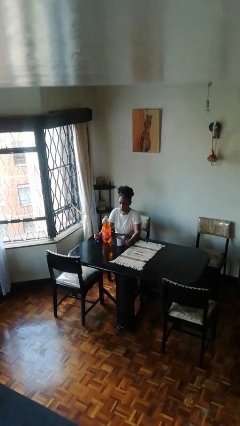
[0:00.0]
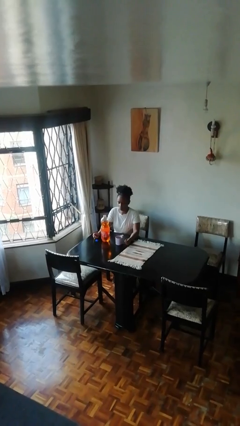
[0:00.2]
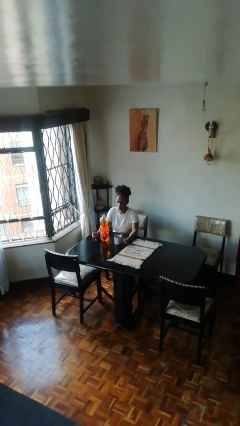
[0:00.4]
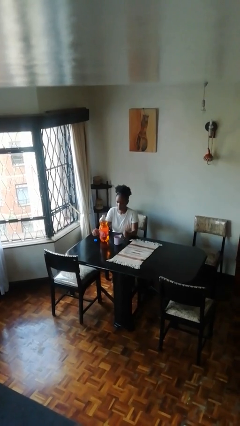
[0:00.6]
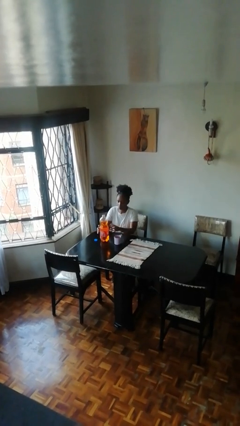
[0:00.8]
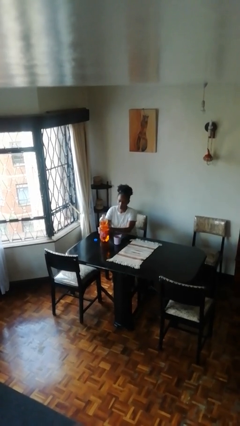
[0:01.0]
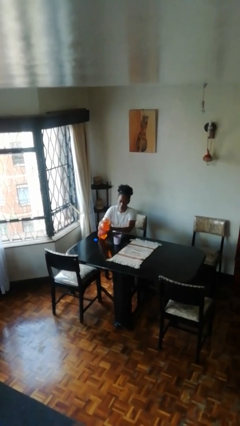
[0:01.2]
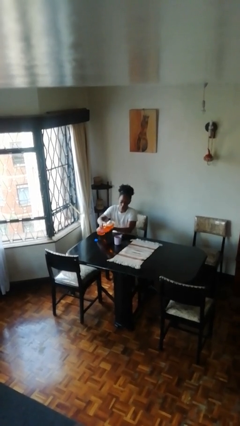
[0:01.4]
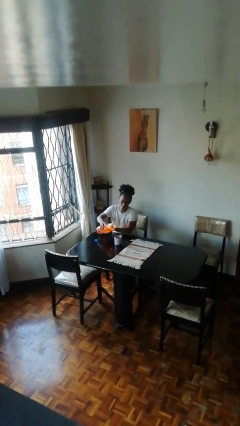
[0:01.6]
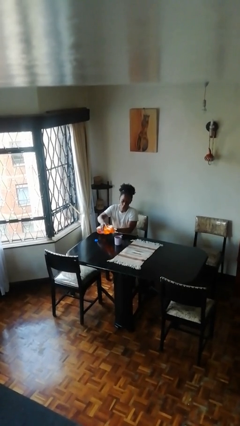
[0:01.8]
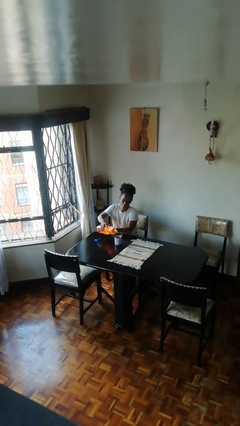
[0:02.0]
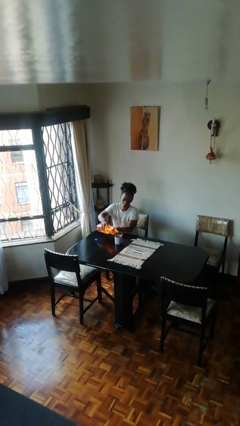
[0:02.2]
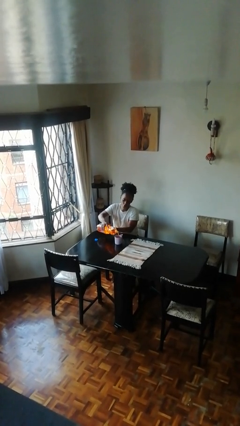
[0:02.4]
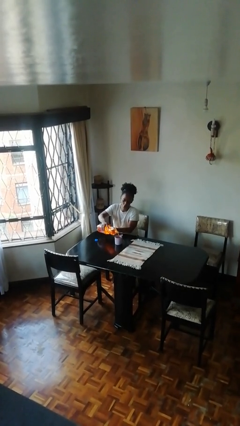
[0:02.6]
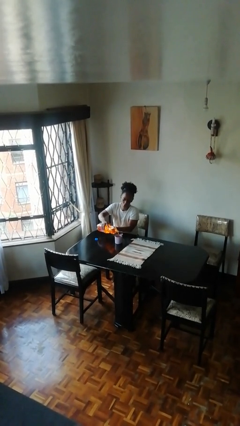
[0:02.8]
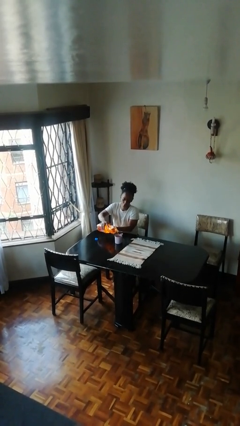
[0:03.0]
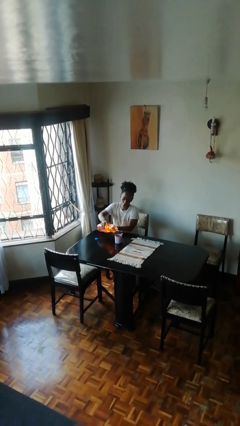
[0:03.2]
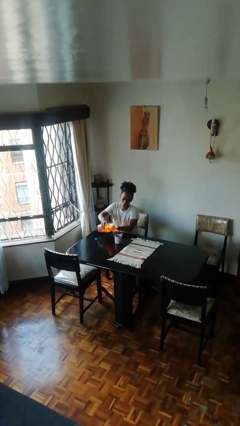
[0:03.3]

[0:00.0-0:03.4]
person pours liquid into cup

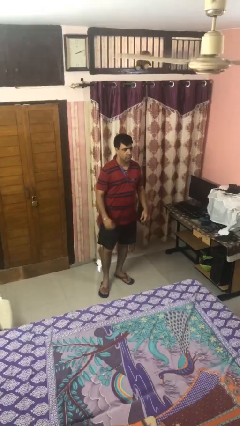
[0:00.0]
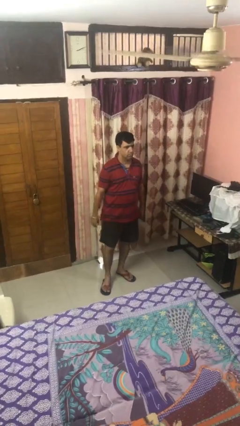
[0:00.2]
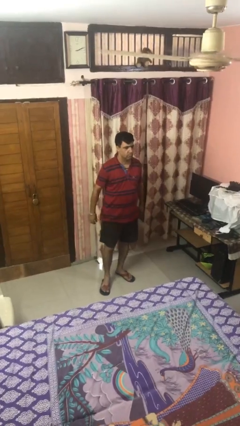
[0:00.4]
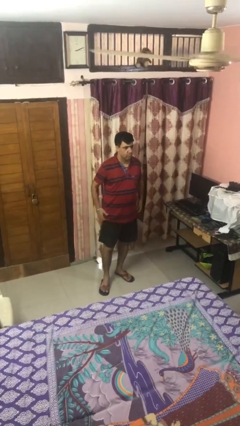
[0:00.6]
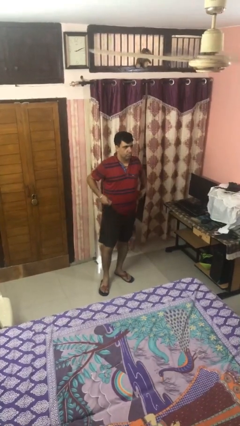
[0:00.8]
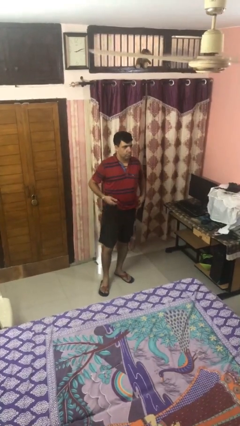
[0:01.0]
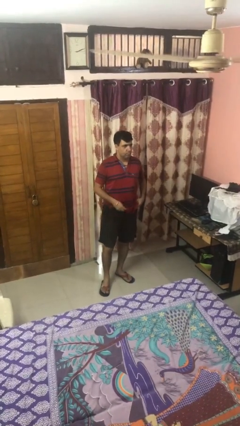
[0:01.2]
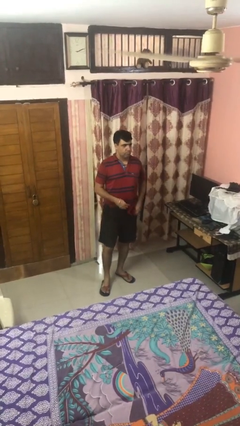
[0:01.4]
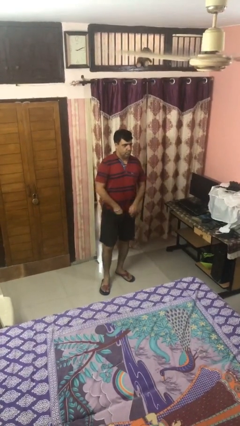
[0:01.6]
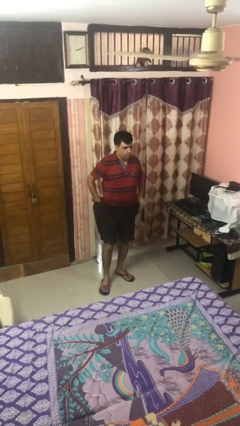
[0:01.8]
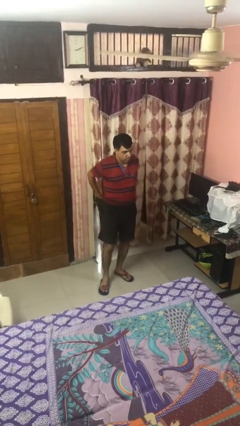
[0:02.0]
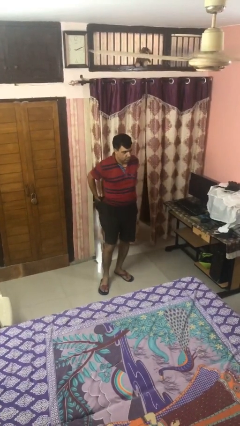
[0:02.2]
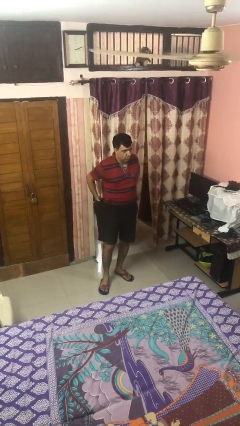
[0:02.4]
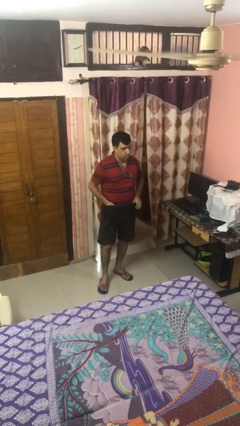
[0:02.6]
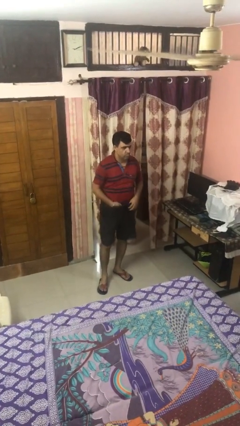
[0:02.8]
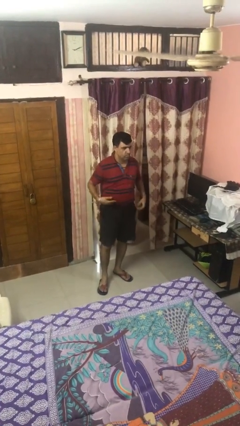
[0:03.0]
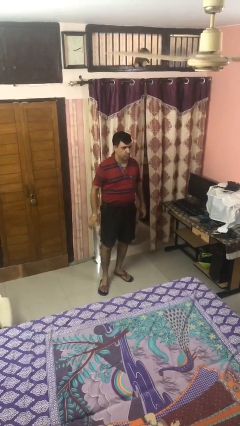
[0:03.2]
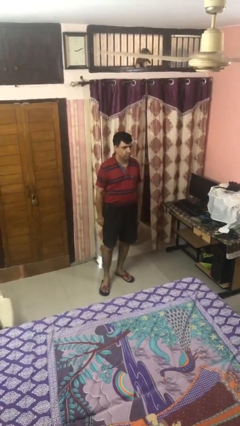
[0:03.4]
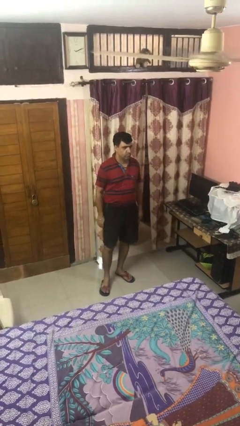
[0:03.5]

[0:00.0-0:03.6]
person tucks in shirt

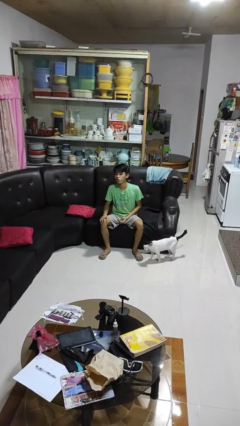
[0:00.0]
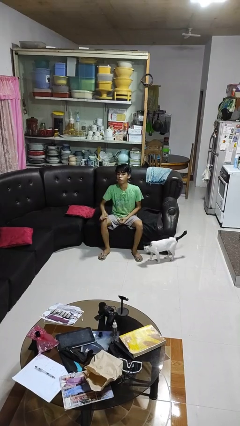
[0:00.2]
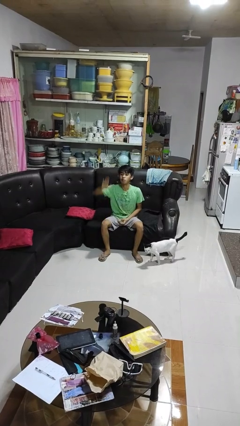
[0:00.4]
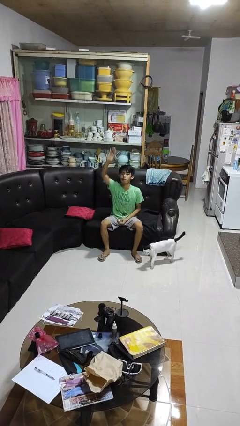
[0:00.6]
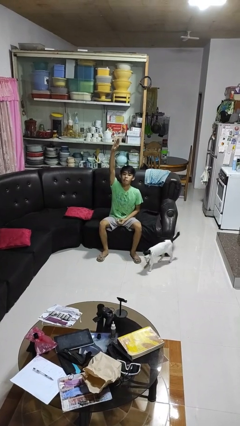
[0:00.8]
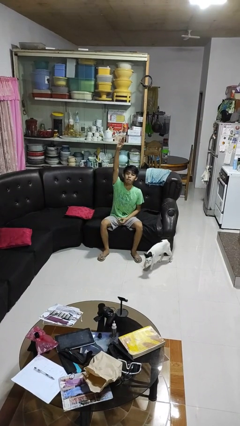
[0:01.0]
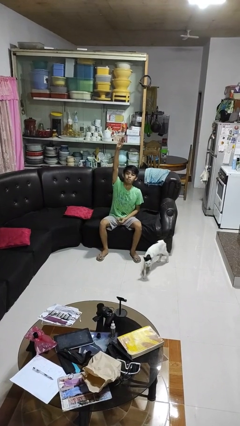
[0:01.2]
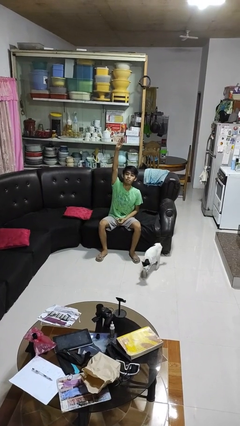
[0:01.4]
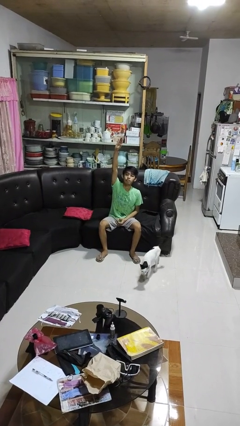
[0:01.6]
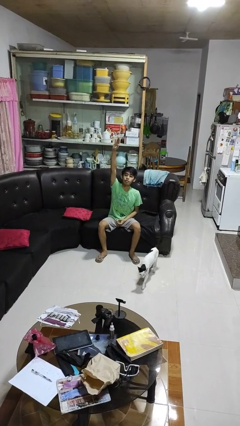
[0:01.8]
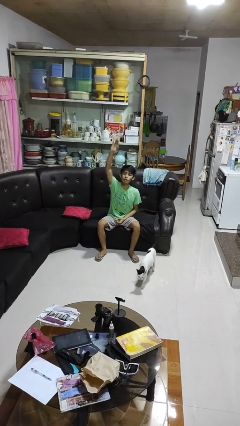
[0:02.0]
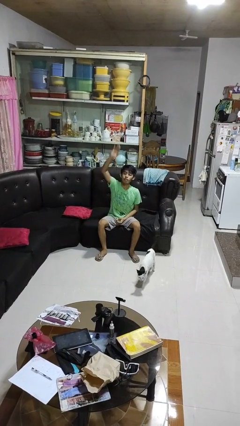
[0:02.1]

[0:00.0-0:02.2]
person gestures raise hand

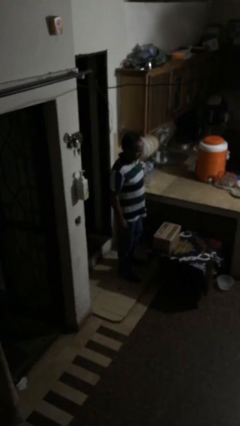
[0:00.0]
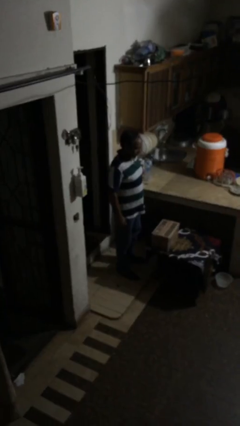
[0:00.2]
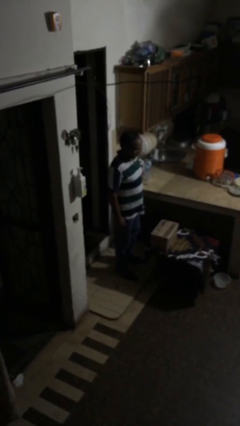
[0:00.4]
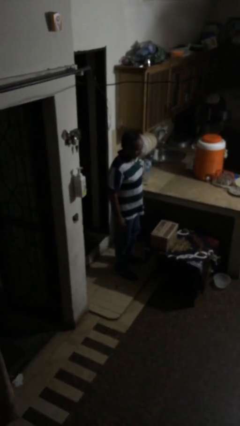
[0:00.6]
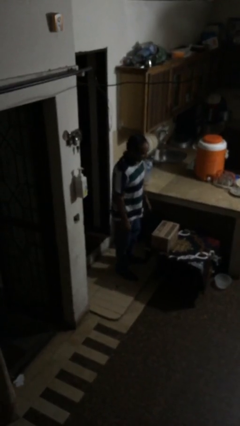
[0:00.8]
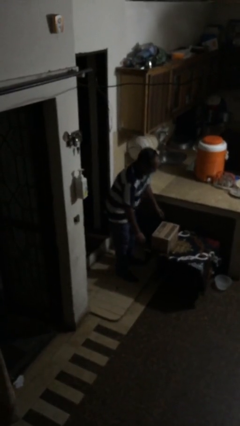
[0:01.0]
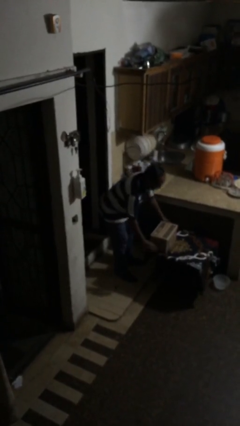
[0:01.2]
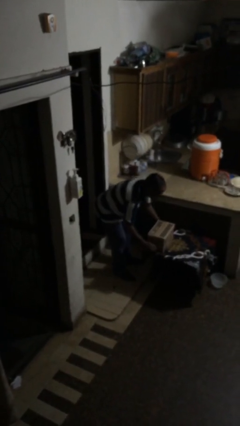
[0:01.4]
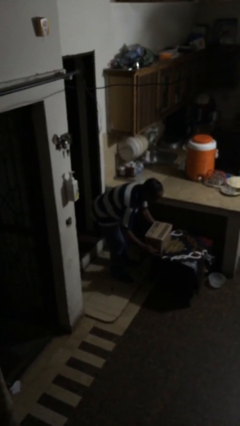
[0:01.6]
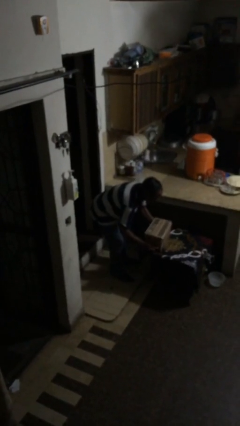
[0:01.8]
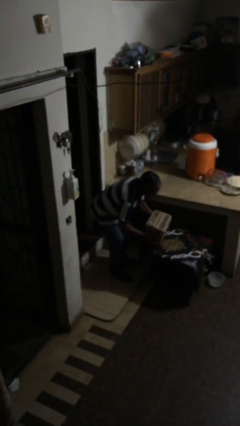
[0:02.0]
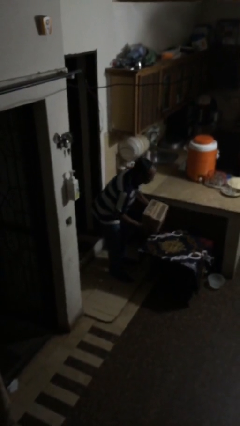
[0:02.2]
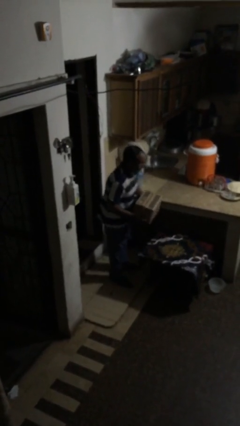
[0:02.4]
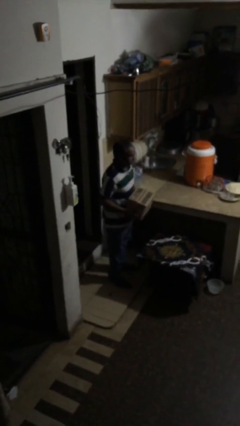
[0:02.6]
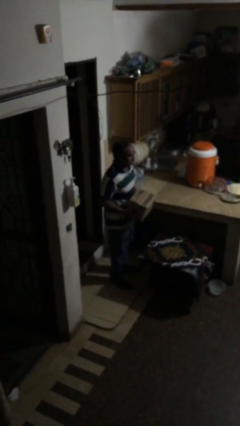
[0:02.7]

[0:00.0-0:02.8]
person picks up object from table

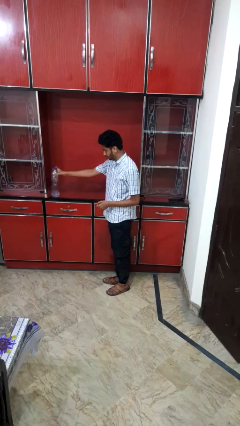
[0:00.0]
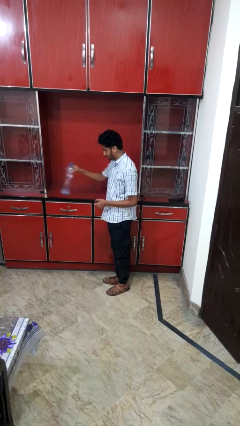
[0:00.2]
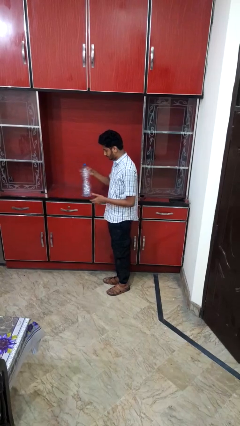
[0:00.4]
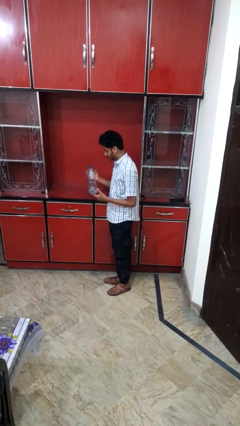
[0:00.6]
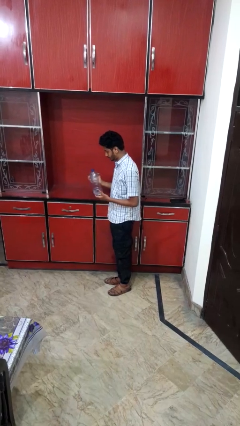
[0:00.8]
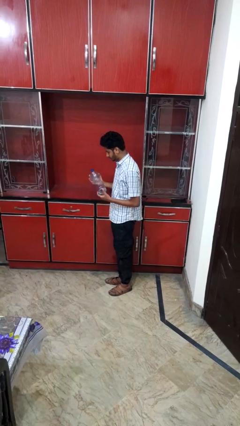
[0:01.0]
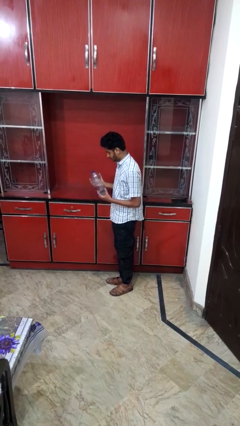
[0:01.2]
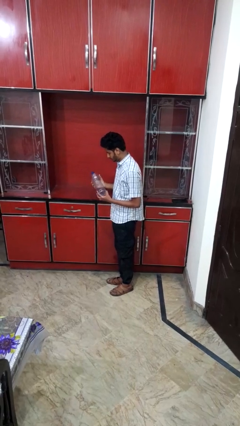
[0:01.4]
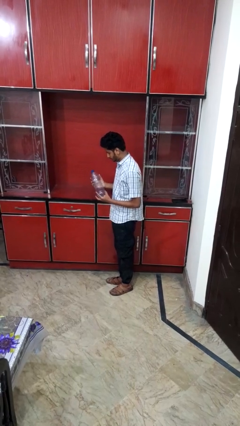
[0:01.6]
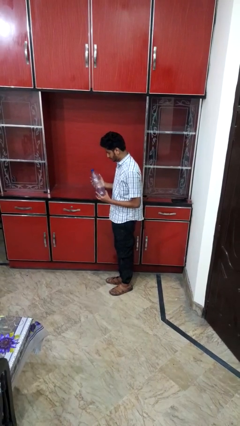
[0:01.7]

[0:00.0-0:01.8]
person picks up object from countertop

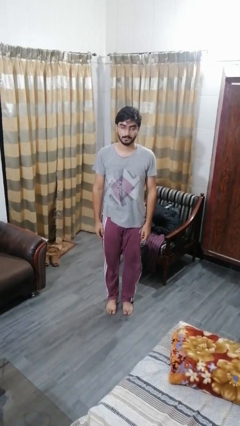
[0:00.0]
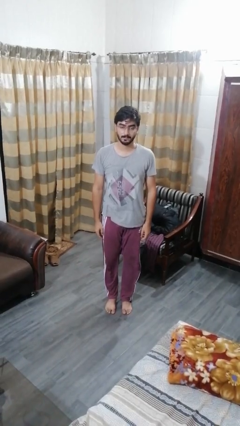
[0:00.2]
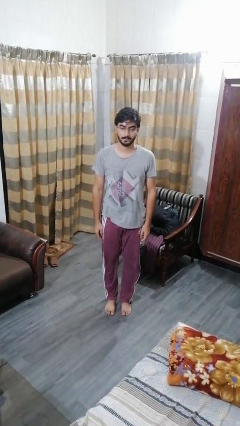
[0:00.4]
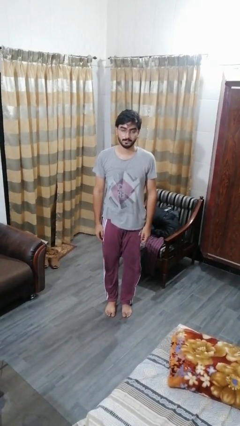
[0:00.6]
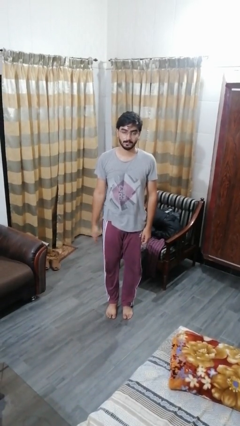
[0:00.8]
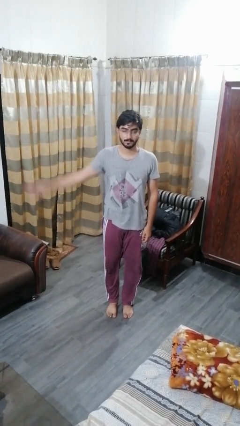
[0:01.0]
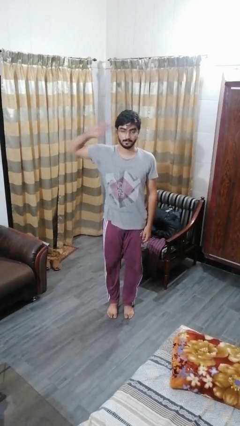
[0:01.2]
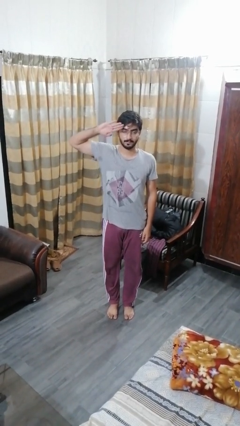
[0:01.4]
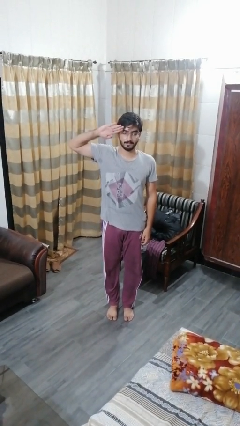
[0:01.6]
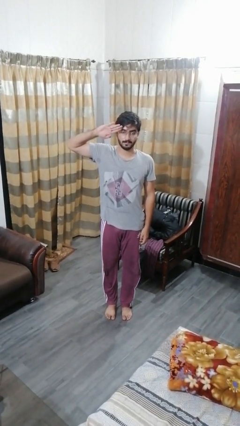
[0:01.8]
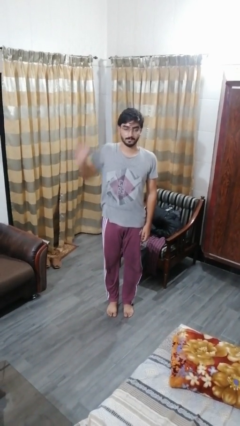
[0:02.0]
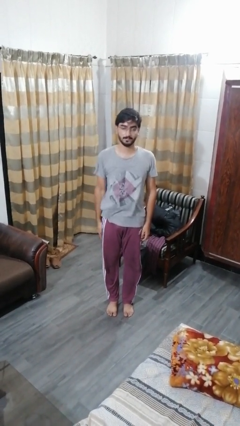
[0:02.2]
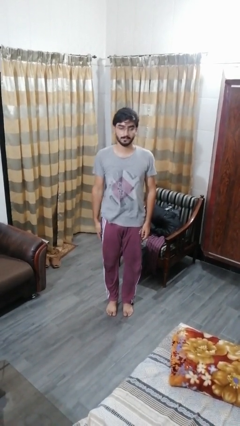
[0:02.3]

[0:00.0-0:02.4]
person salutes

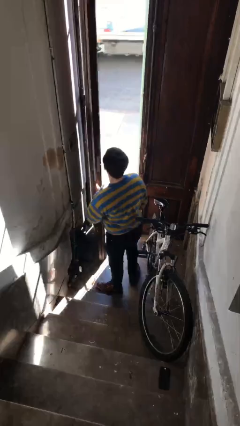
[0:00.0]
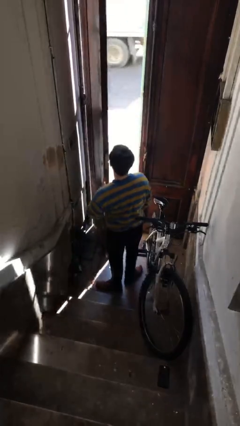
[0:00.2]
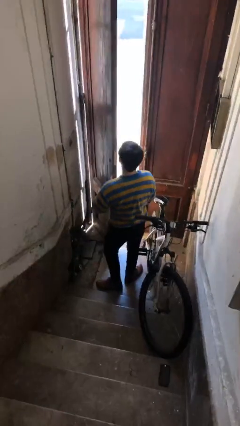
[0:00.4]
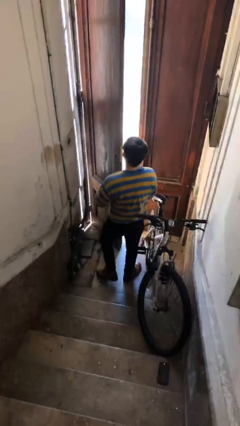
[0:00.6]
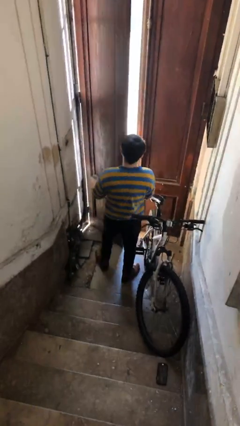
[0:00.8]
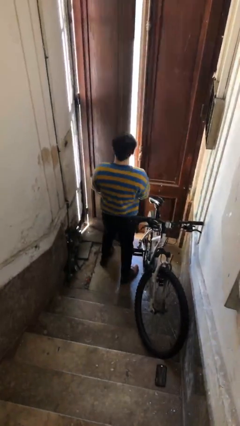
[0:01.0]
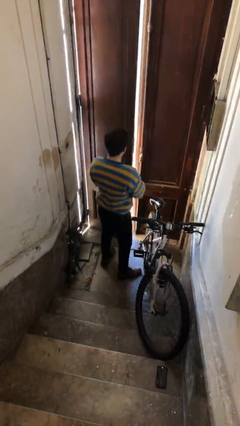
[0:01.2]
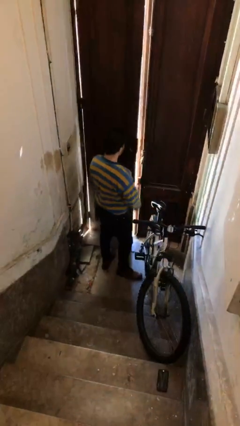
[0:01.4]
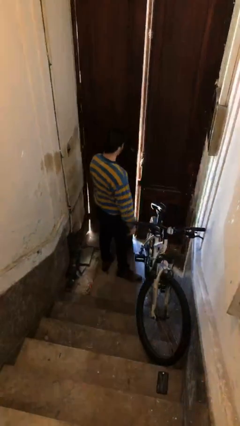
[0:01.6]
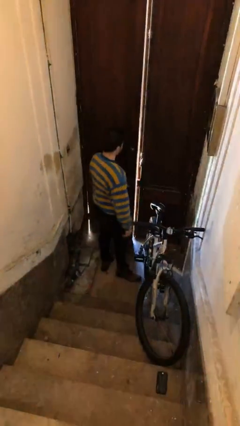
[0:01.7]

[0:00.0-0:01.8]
person closes facility door
